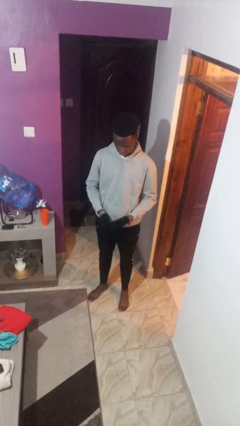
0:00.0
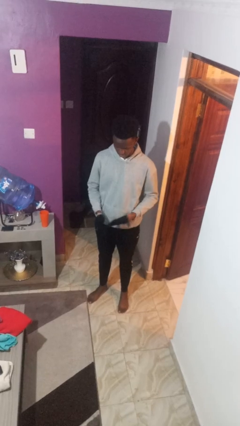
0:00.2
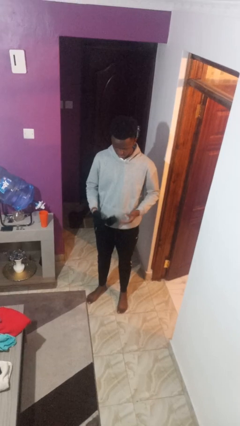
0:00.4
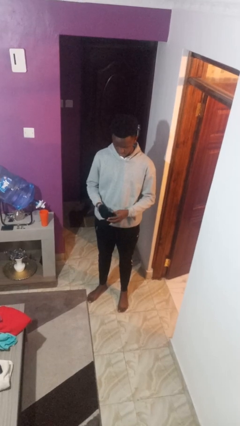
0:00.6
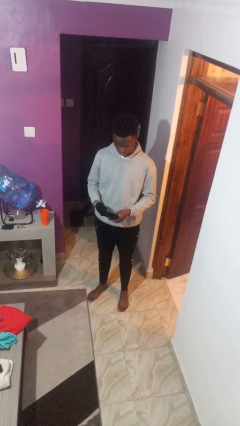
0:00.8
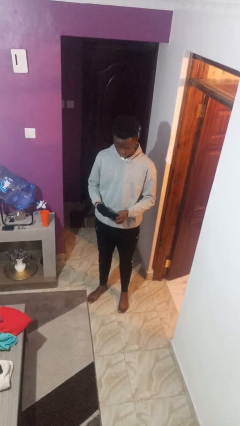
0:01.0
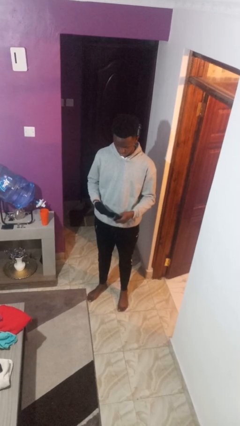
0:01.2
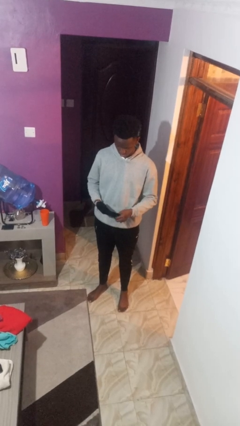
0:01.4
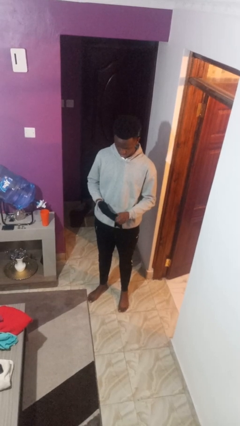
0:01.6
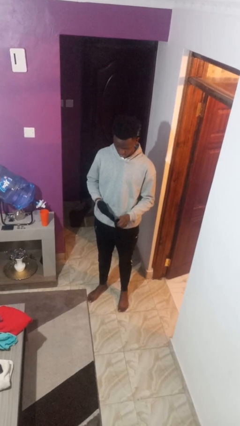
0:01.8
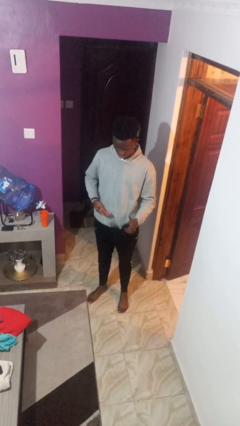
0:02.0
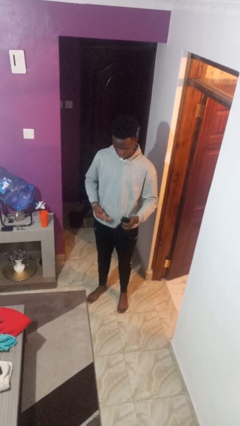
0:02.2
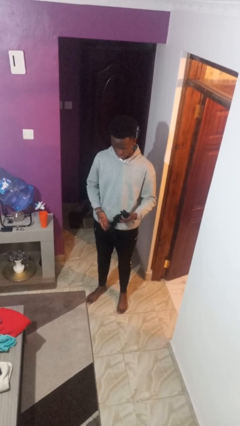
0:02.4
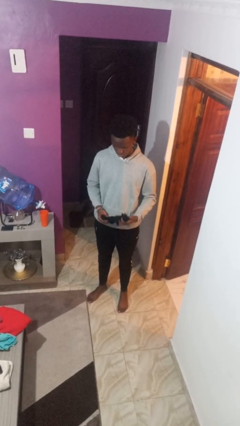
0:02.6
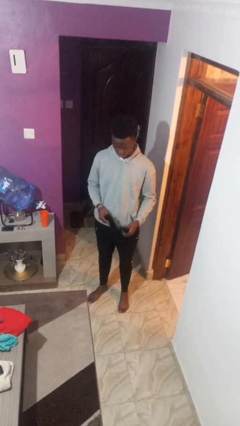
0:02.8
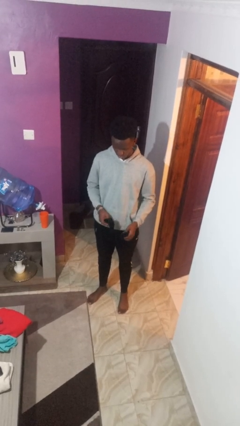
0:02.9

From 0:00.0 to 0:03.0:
person takes off gloves

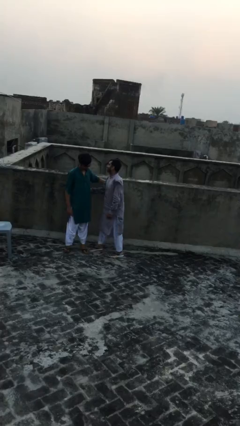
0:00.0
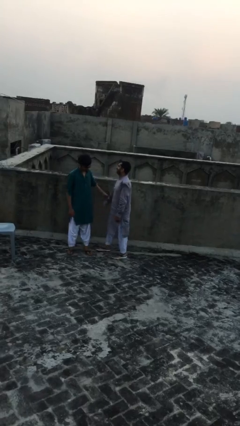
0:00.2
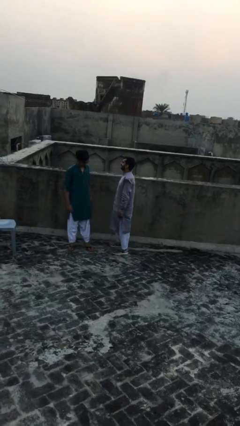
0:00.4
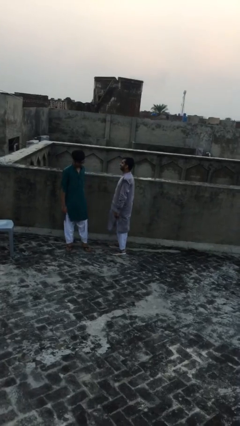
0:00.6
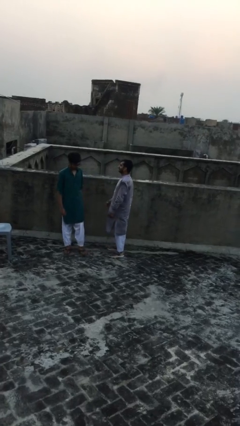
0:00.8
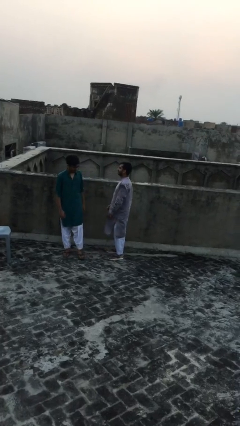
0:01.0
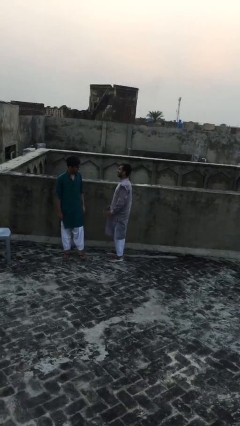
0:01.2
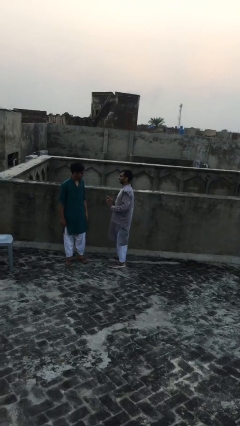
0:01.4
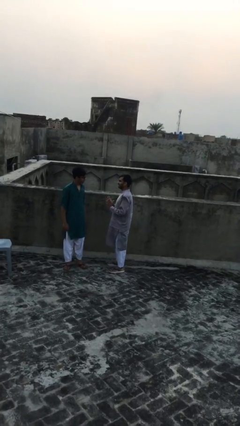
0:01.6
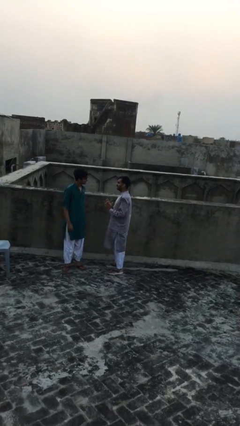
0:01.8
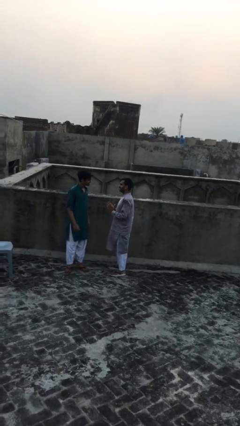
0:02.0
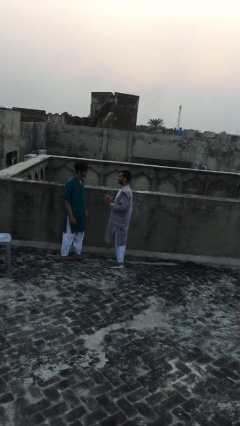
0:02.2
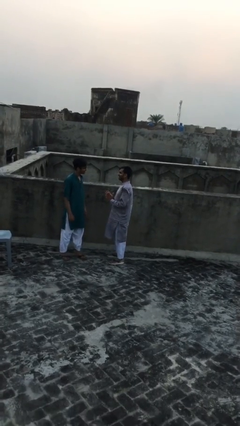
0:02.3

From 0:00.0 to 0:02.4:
person talks to person

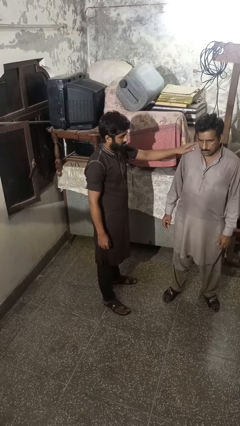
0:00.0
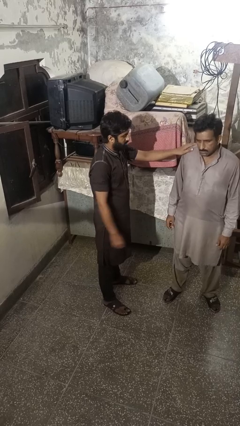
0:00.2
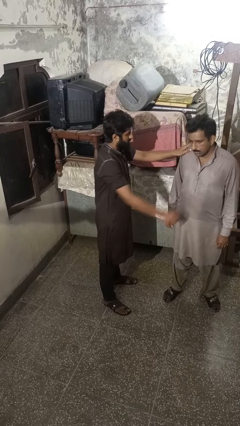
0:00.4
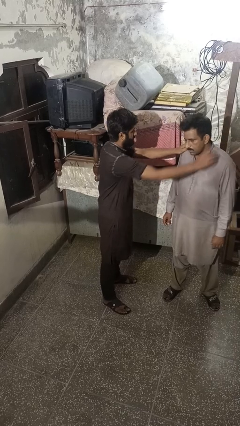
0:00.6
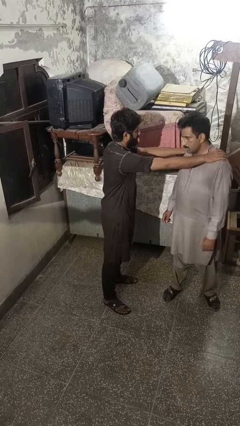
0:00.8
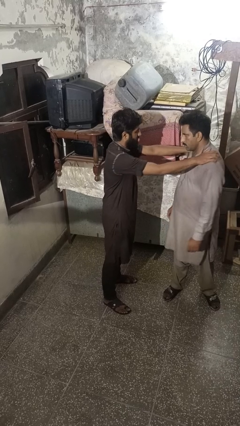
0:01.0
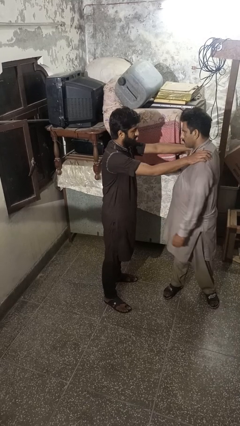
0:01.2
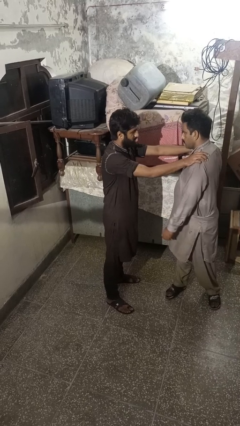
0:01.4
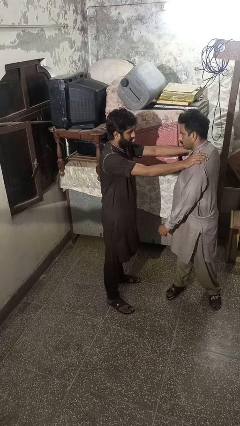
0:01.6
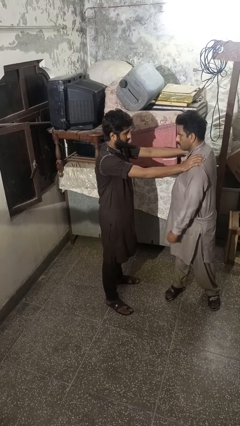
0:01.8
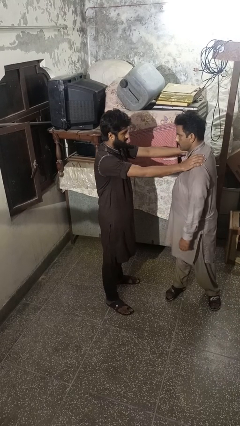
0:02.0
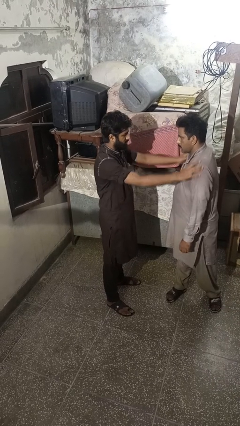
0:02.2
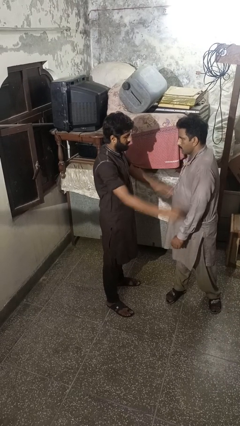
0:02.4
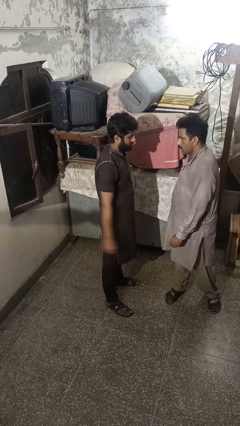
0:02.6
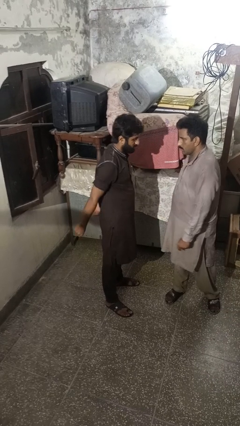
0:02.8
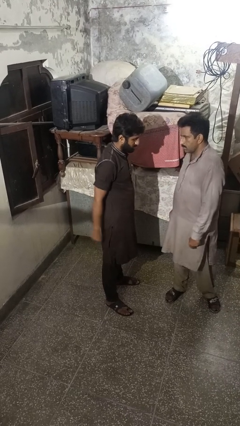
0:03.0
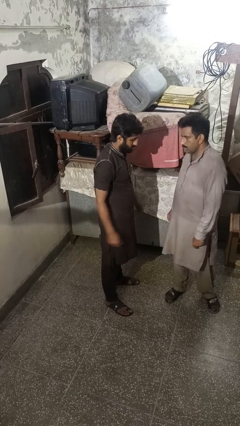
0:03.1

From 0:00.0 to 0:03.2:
person spins person around

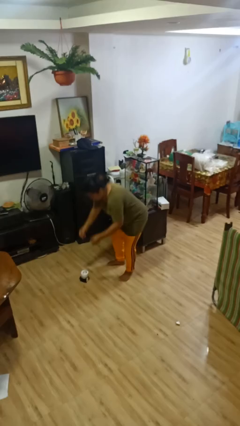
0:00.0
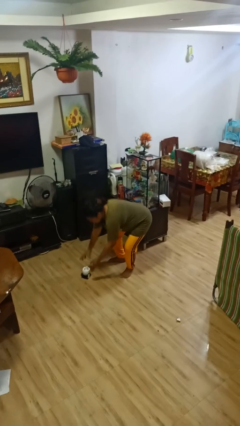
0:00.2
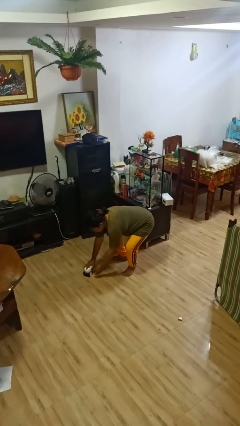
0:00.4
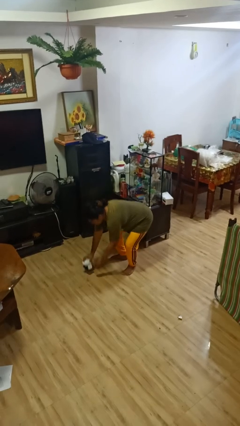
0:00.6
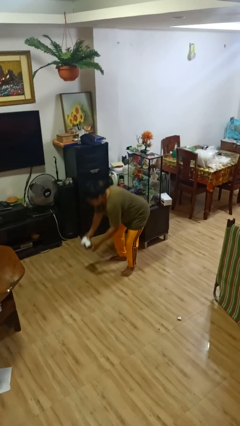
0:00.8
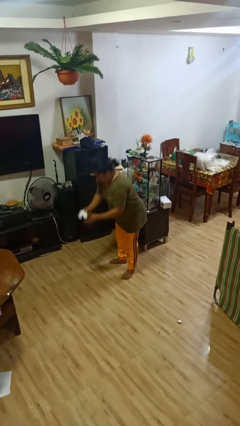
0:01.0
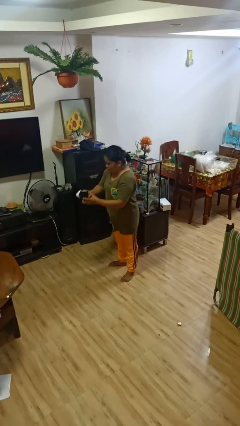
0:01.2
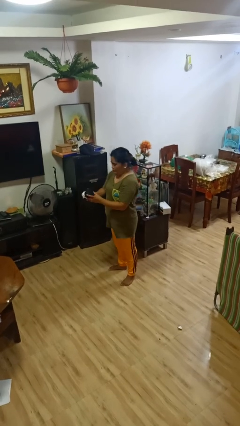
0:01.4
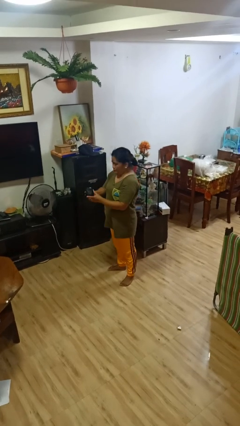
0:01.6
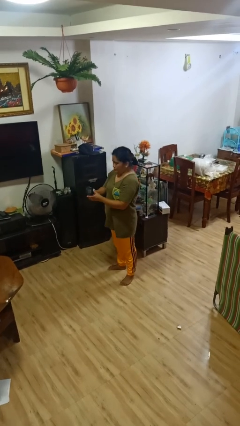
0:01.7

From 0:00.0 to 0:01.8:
person picks up object from floor

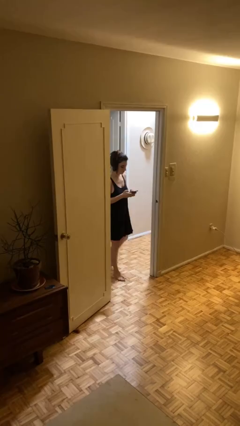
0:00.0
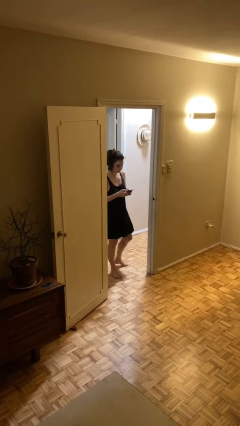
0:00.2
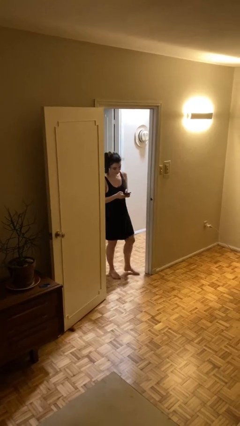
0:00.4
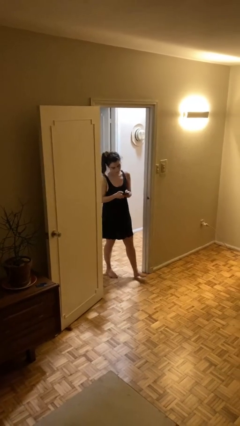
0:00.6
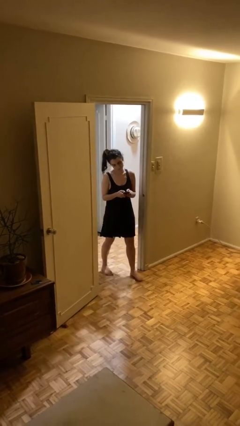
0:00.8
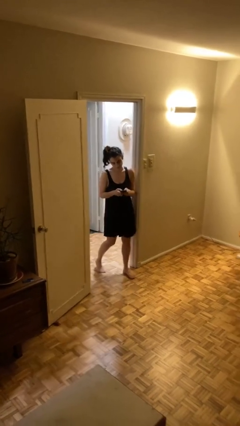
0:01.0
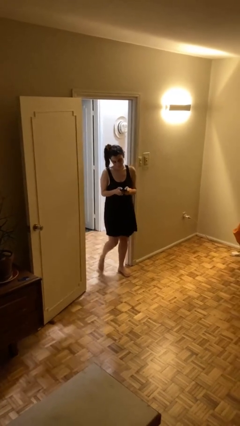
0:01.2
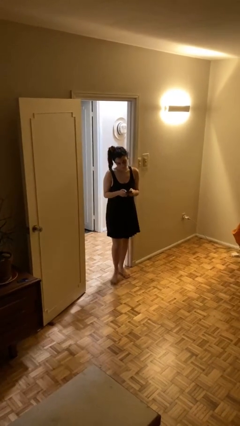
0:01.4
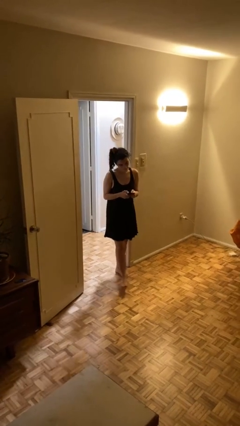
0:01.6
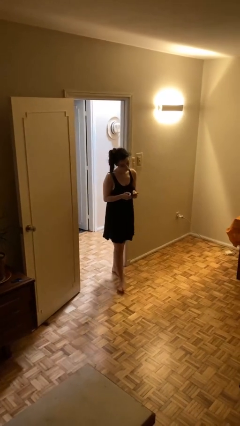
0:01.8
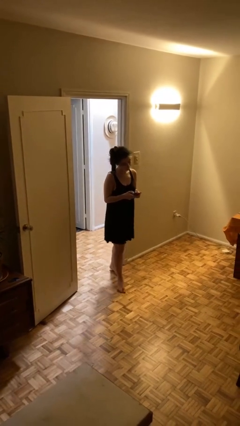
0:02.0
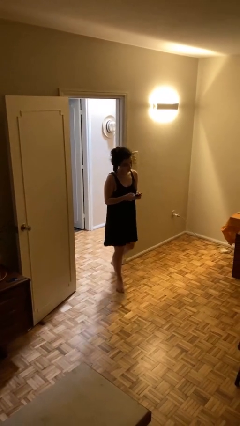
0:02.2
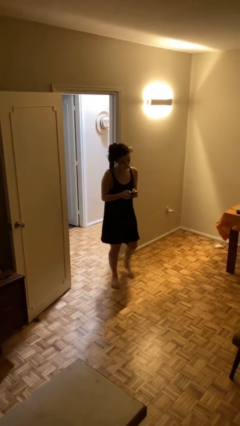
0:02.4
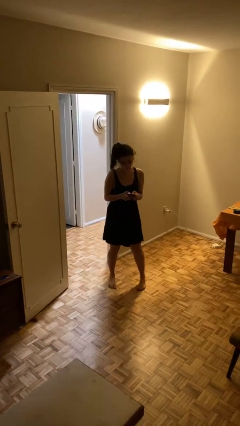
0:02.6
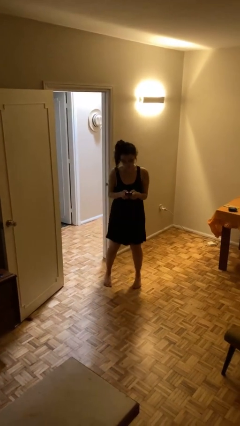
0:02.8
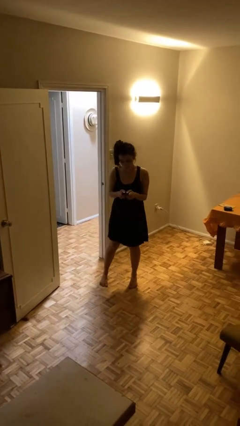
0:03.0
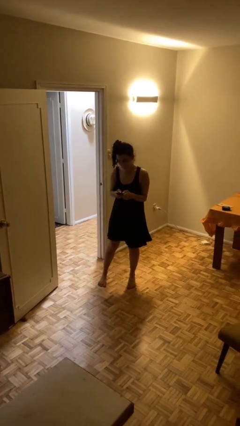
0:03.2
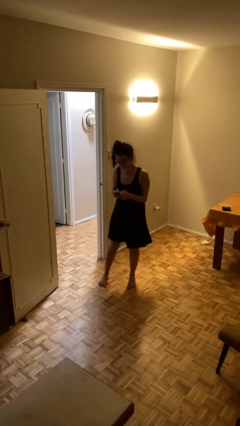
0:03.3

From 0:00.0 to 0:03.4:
person enters scene through structure

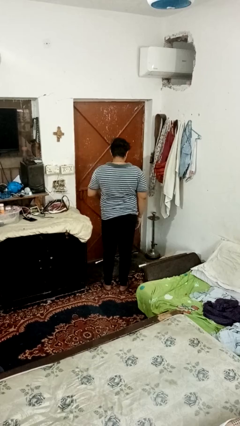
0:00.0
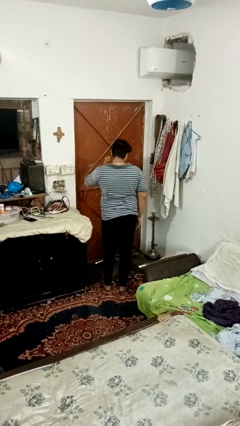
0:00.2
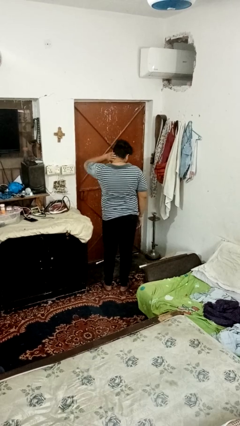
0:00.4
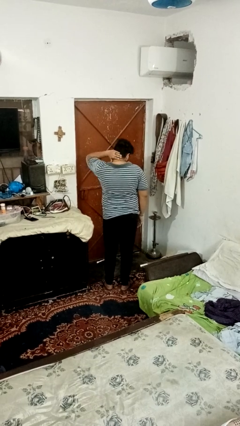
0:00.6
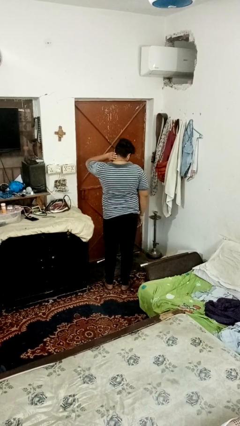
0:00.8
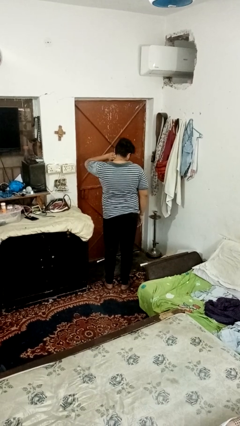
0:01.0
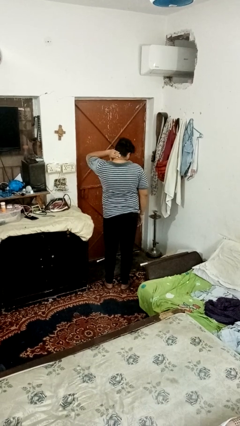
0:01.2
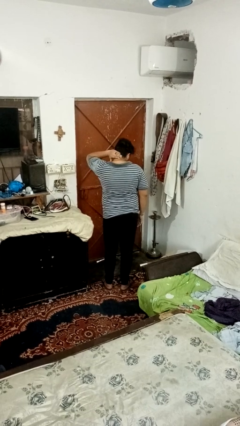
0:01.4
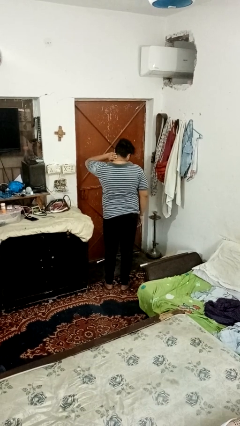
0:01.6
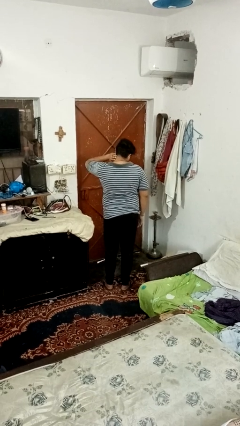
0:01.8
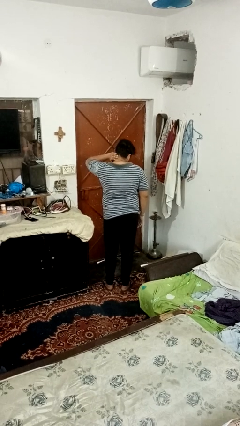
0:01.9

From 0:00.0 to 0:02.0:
person rubs neck

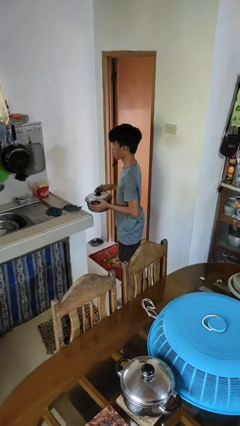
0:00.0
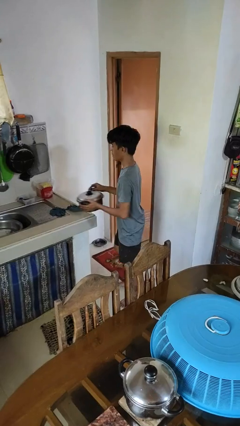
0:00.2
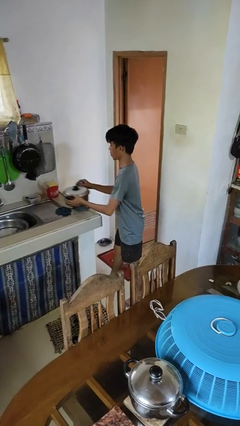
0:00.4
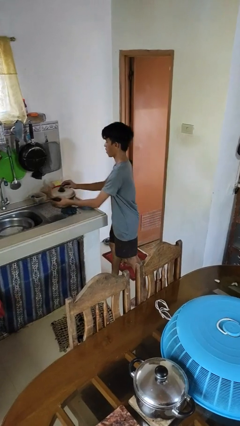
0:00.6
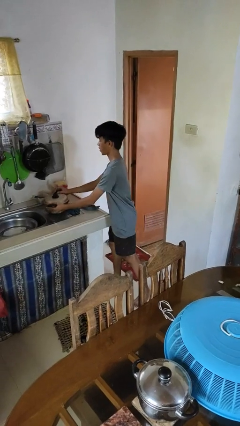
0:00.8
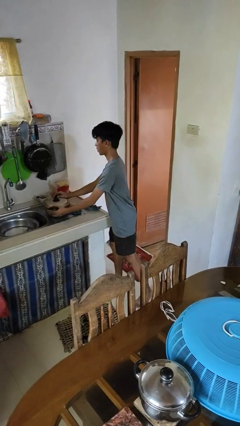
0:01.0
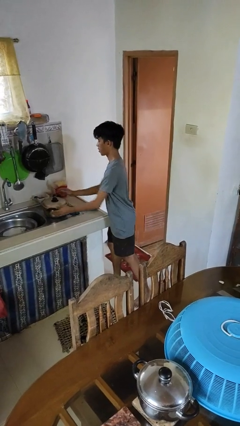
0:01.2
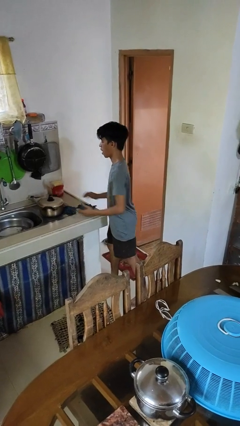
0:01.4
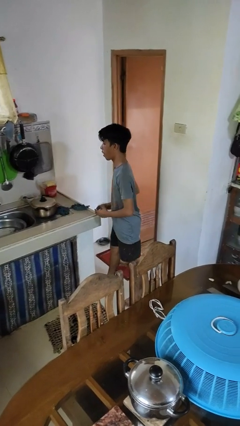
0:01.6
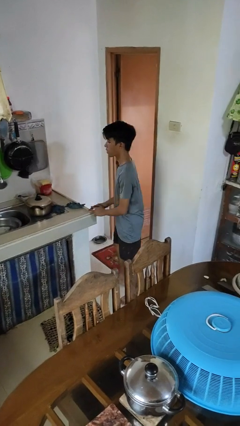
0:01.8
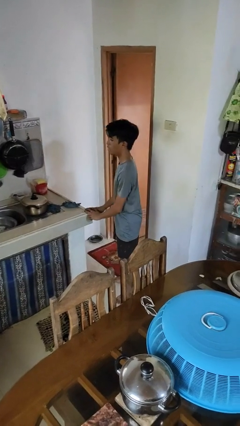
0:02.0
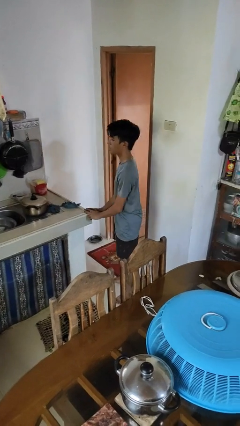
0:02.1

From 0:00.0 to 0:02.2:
person puts down object on countertop
